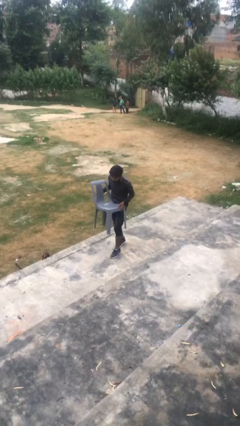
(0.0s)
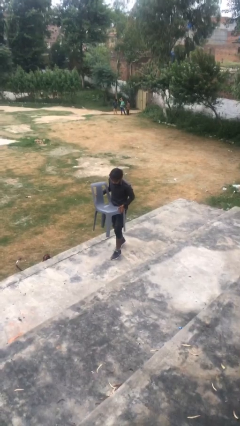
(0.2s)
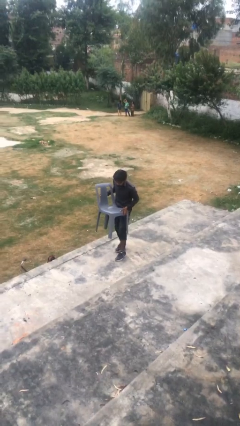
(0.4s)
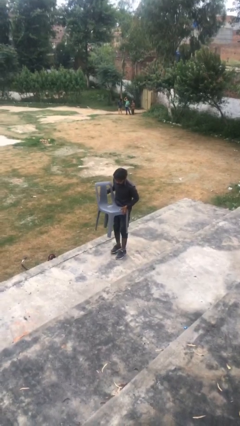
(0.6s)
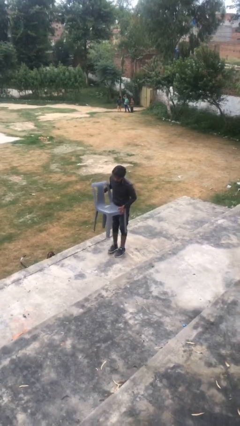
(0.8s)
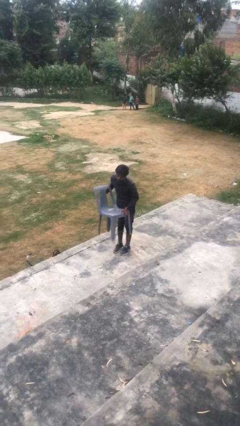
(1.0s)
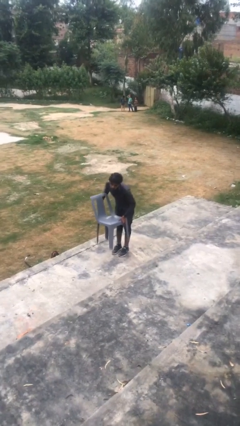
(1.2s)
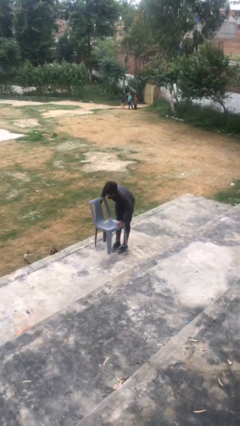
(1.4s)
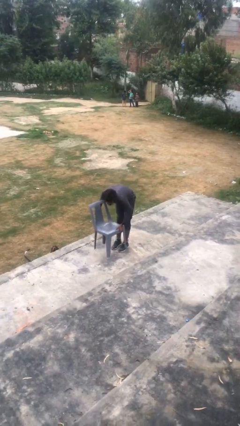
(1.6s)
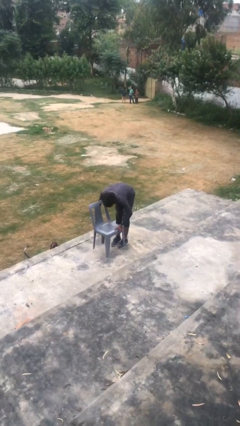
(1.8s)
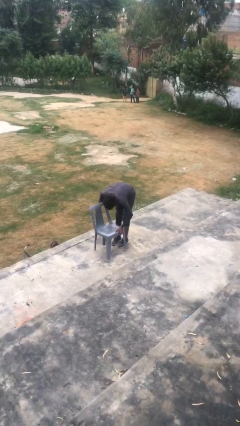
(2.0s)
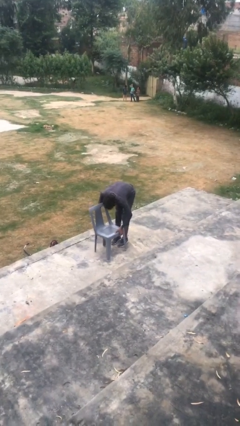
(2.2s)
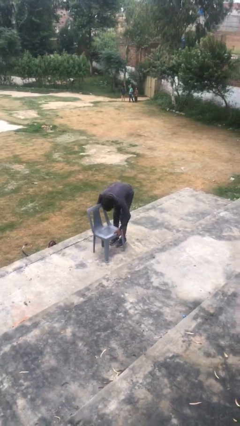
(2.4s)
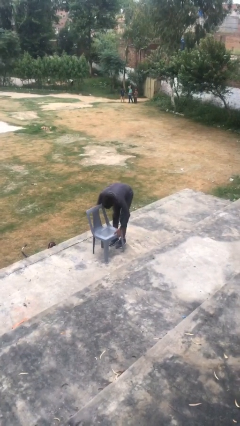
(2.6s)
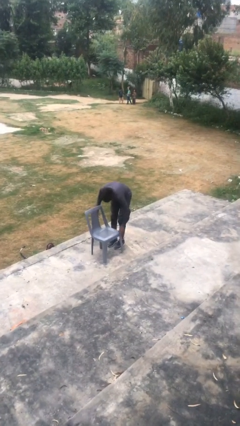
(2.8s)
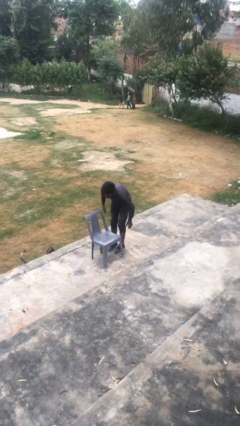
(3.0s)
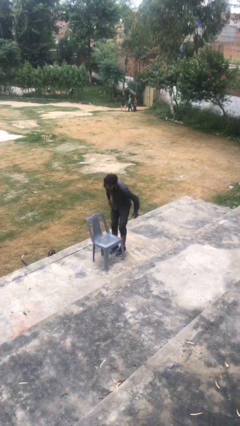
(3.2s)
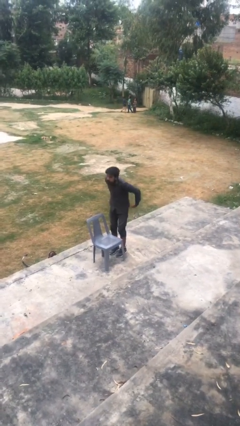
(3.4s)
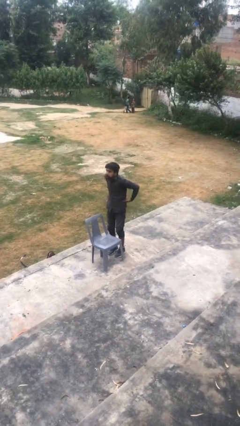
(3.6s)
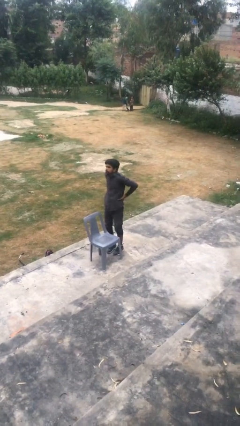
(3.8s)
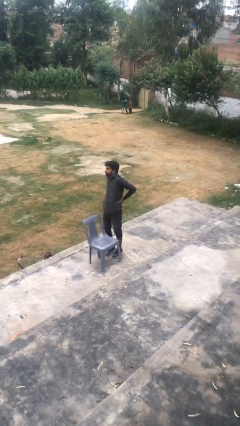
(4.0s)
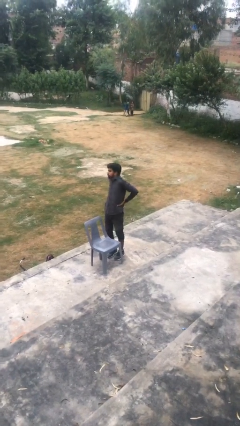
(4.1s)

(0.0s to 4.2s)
person puts down object on floor

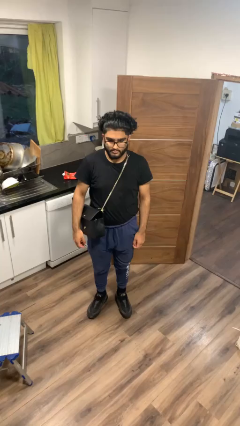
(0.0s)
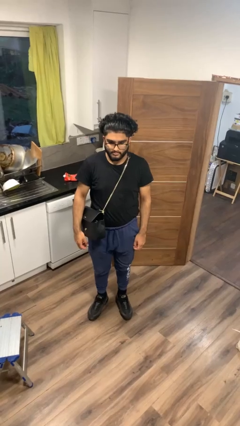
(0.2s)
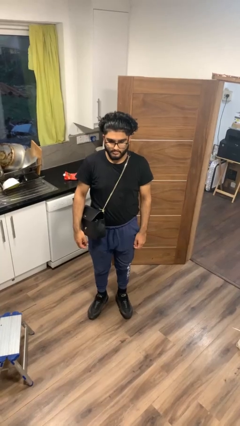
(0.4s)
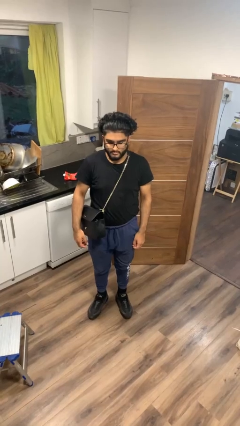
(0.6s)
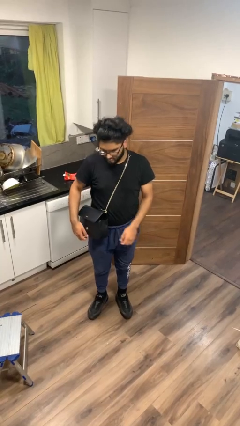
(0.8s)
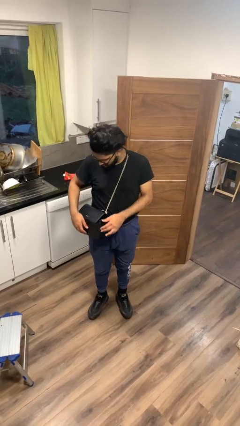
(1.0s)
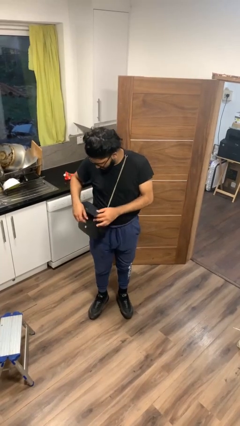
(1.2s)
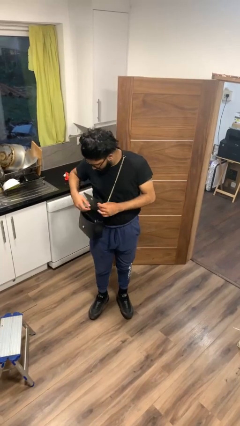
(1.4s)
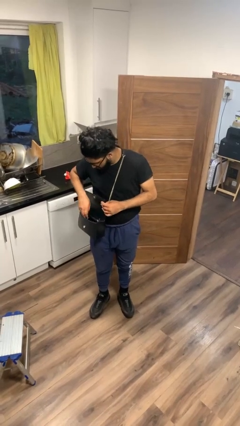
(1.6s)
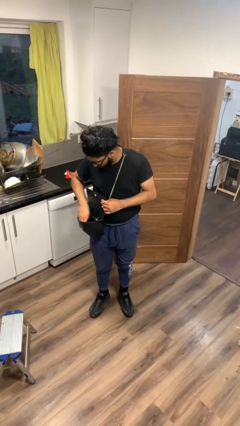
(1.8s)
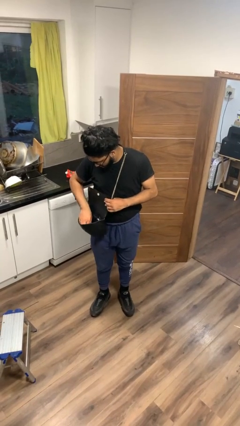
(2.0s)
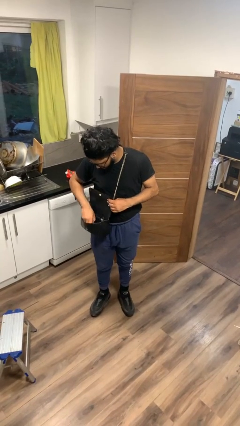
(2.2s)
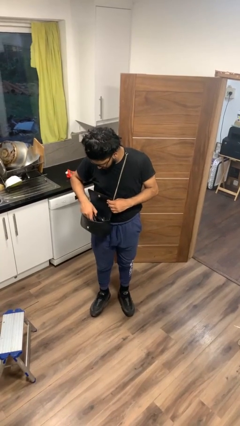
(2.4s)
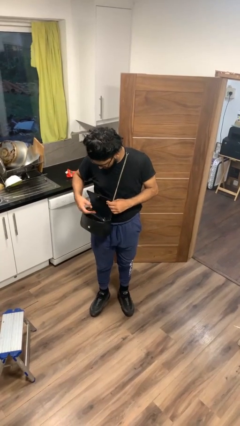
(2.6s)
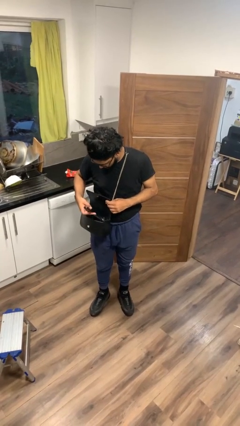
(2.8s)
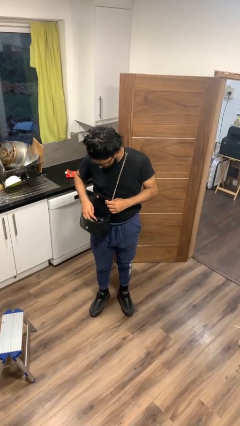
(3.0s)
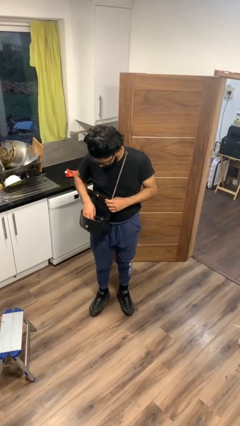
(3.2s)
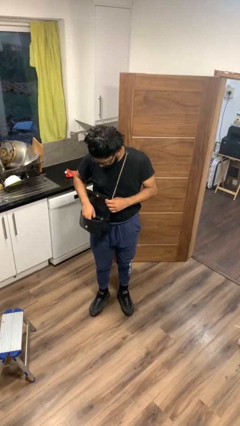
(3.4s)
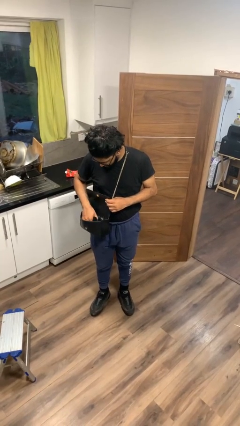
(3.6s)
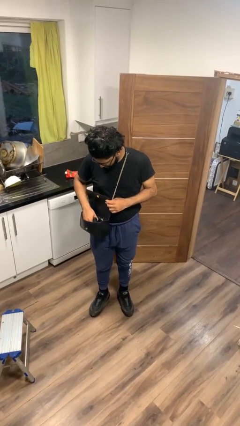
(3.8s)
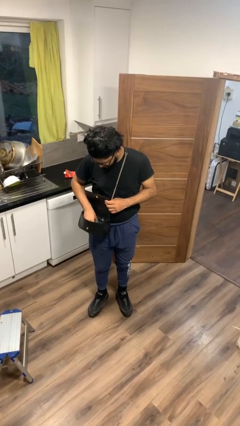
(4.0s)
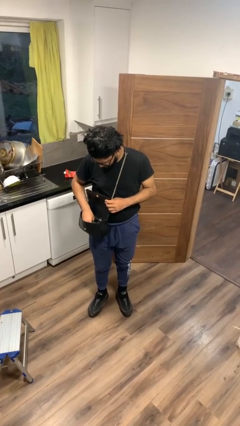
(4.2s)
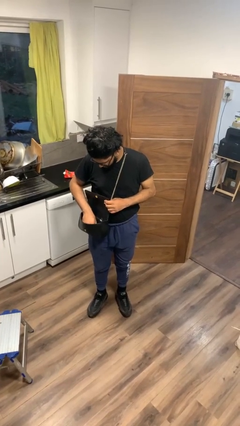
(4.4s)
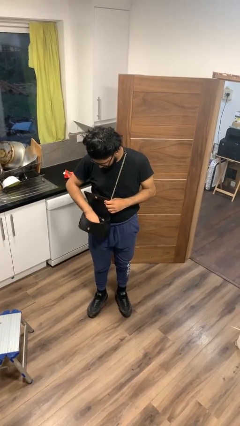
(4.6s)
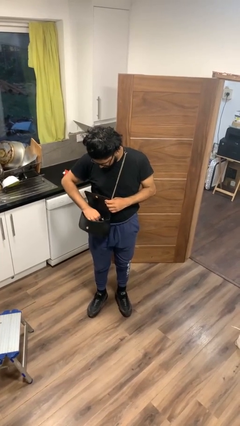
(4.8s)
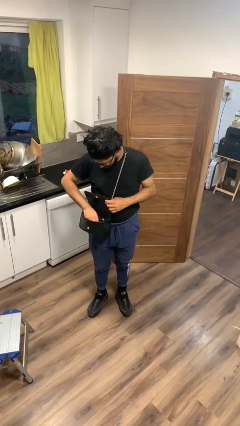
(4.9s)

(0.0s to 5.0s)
person searches in purse

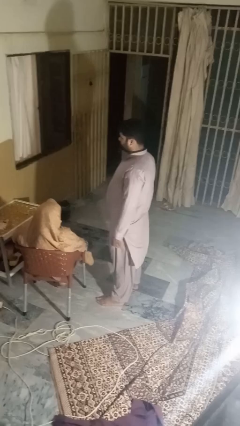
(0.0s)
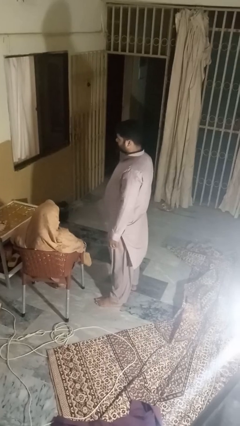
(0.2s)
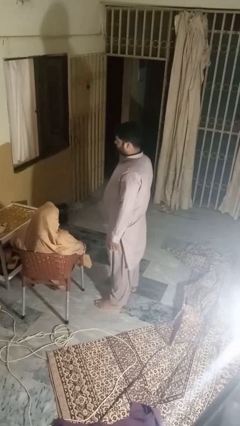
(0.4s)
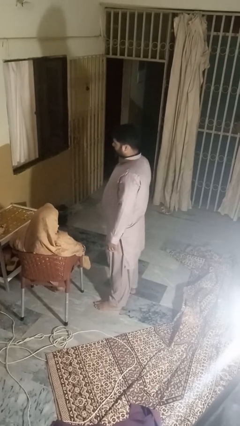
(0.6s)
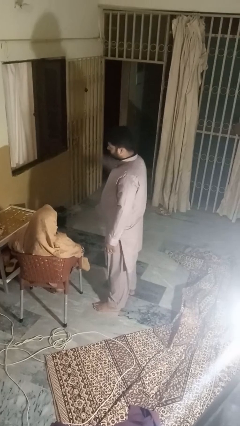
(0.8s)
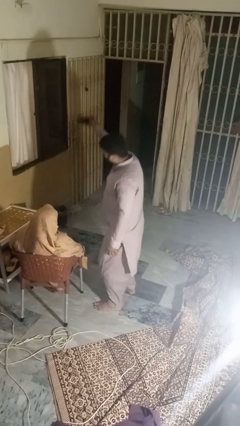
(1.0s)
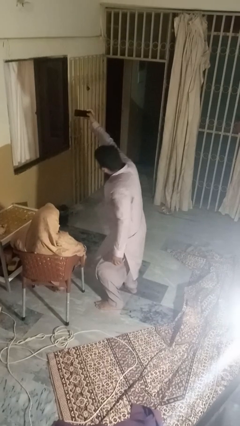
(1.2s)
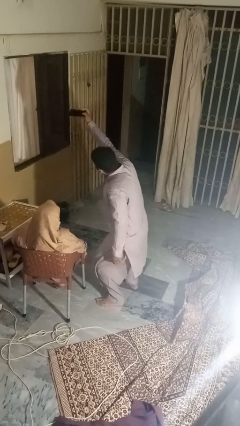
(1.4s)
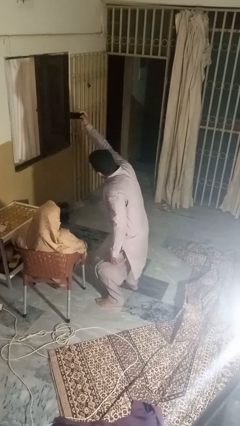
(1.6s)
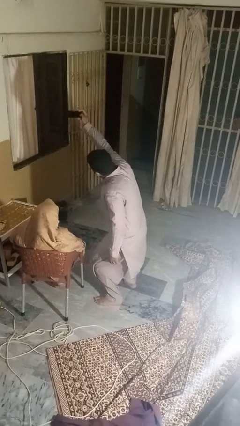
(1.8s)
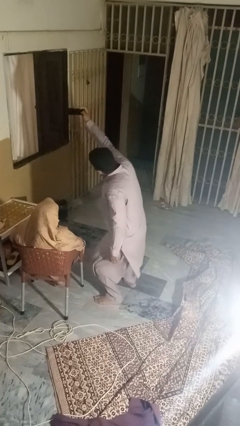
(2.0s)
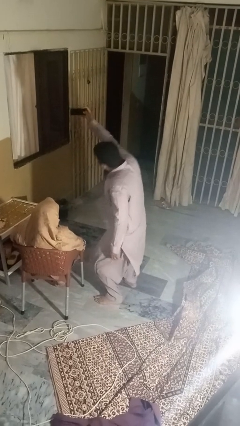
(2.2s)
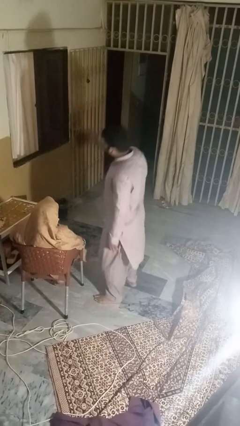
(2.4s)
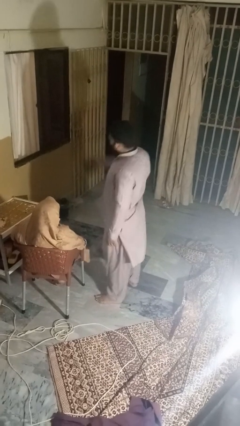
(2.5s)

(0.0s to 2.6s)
person takes selfie with person

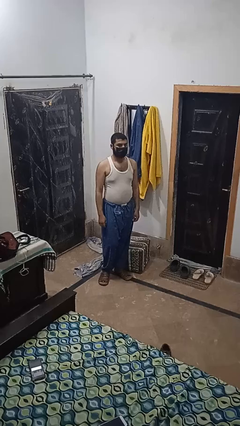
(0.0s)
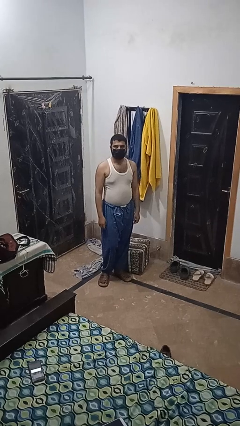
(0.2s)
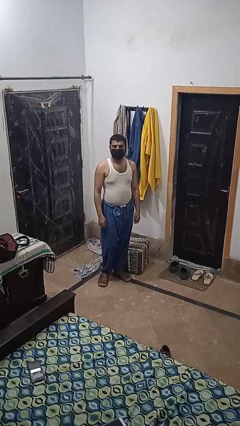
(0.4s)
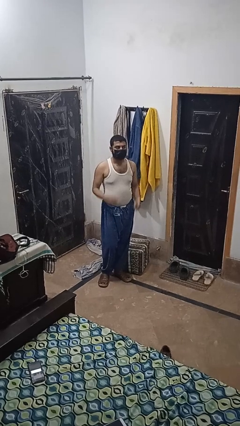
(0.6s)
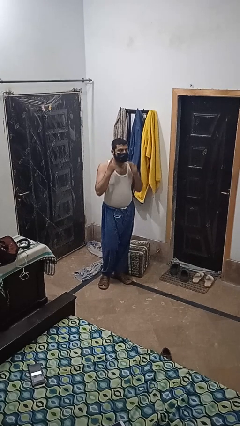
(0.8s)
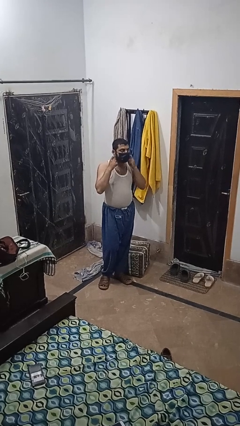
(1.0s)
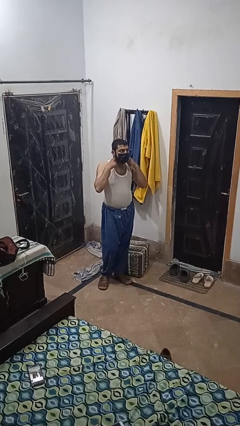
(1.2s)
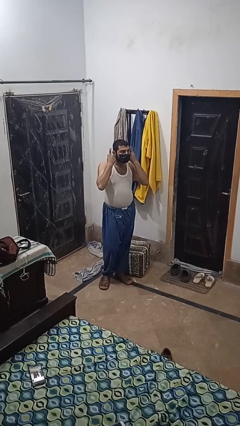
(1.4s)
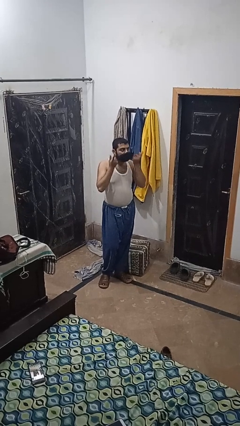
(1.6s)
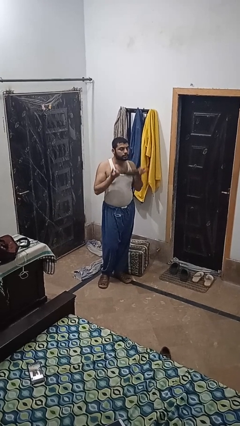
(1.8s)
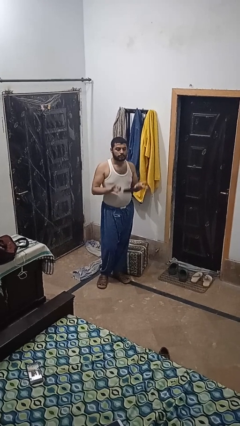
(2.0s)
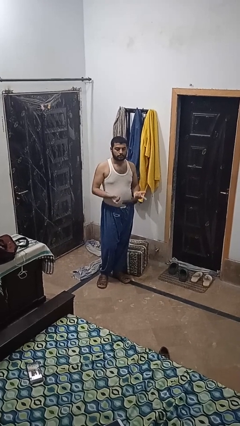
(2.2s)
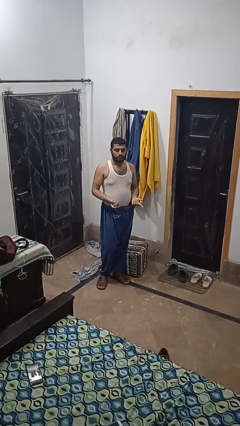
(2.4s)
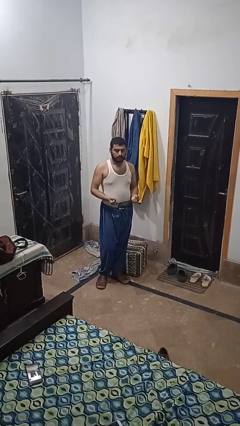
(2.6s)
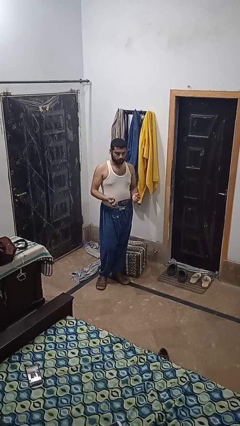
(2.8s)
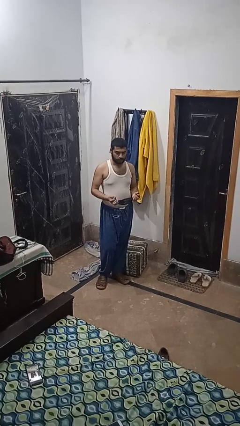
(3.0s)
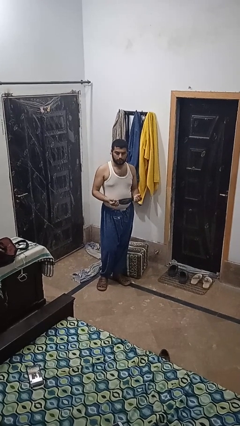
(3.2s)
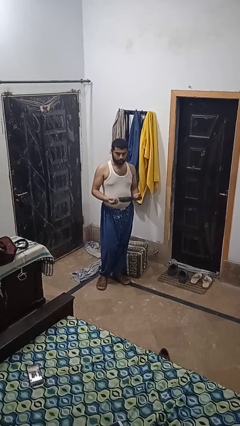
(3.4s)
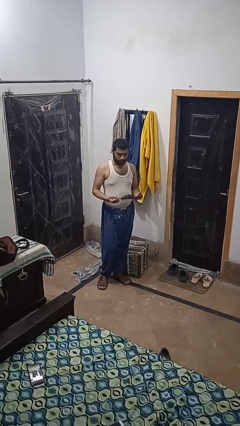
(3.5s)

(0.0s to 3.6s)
person takes off facemask

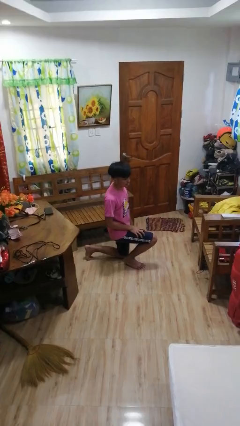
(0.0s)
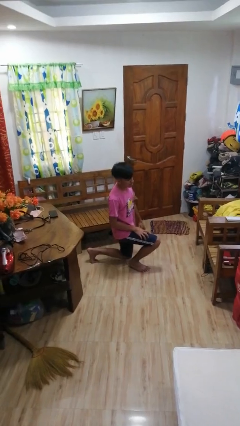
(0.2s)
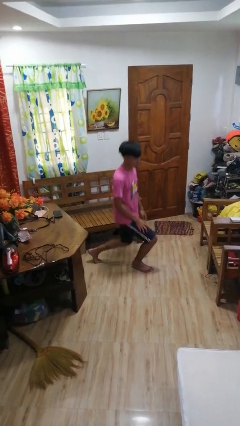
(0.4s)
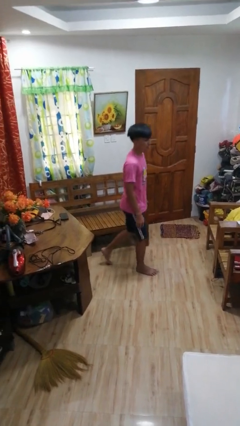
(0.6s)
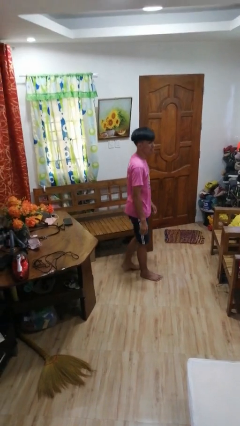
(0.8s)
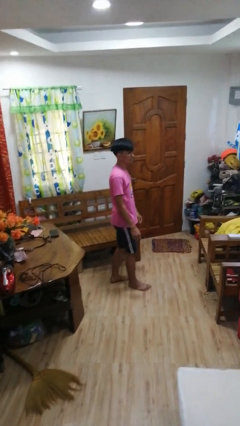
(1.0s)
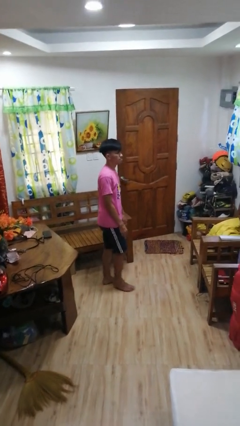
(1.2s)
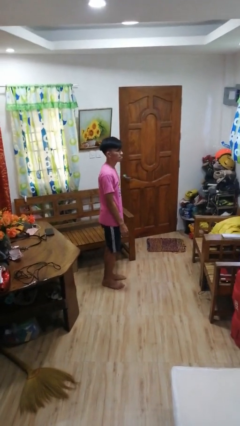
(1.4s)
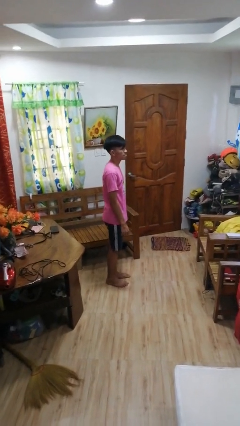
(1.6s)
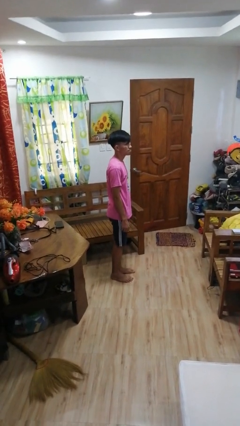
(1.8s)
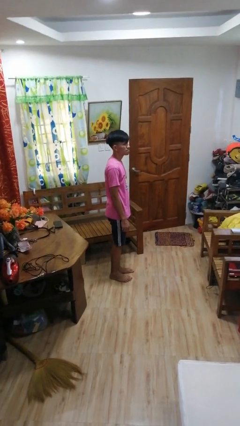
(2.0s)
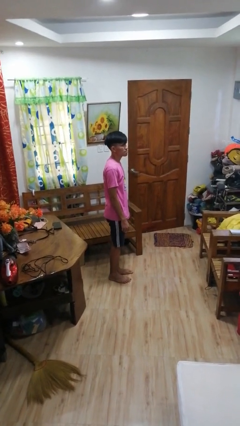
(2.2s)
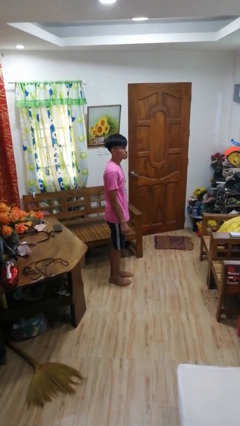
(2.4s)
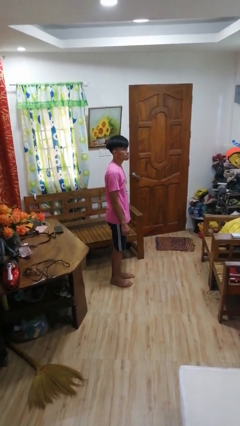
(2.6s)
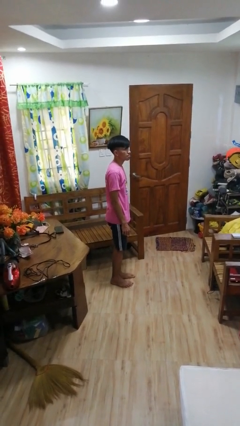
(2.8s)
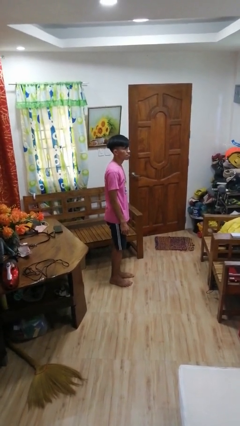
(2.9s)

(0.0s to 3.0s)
person stands up from floor
